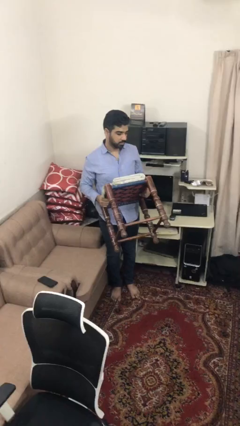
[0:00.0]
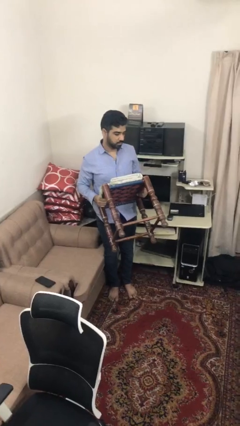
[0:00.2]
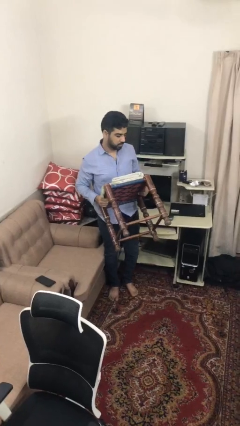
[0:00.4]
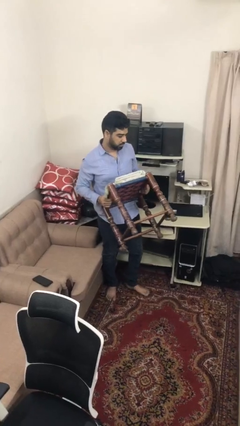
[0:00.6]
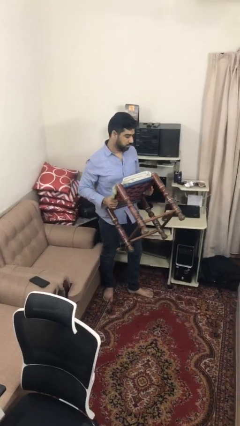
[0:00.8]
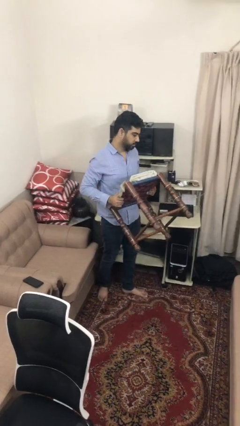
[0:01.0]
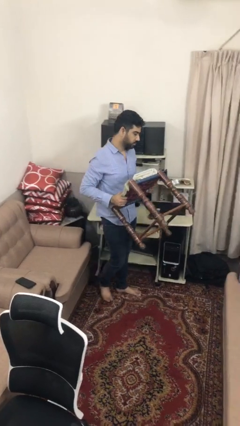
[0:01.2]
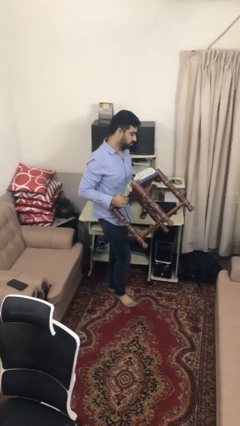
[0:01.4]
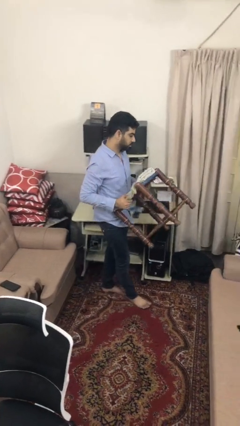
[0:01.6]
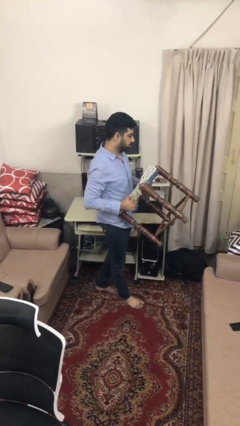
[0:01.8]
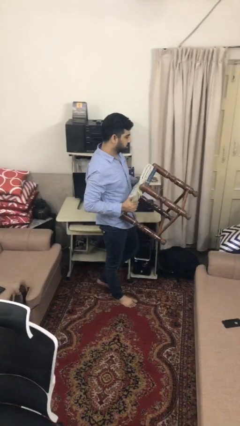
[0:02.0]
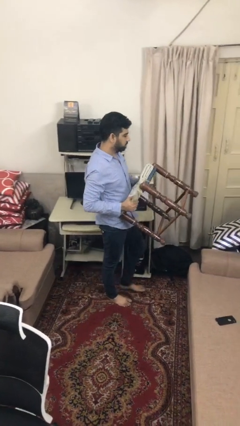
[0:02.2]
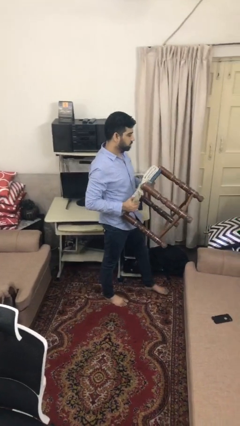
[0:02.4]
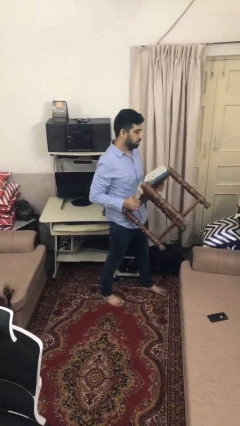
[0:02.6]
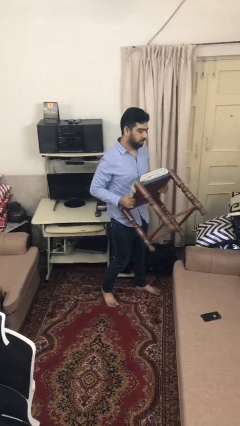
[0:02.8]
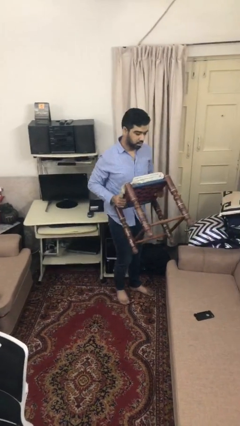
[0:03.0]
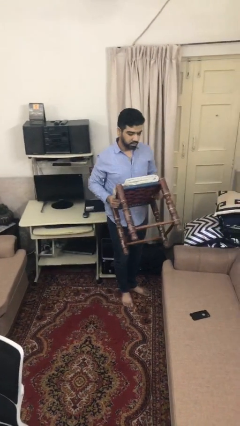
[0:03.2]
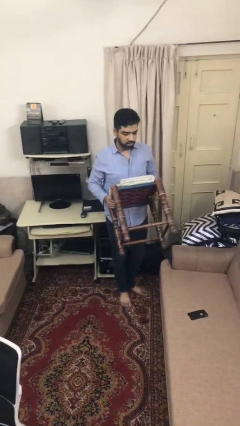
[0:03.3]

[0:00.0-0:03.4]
person carries furniture

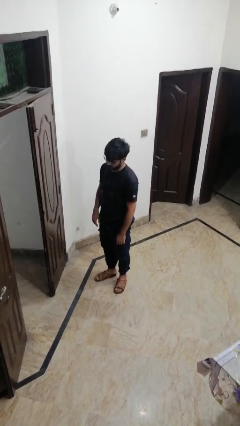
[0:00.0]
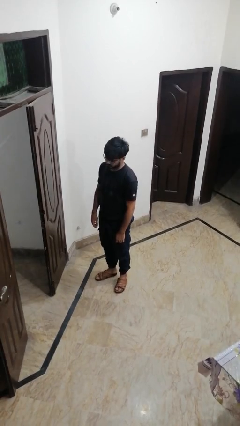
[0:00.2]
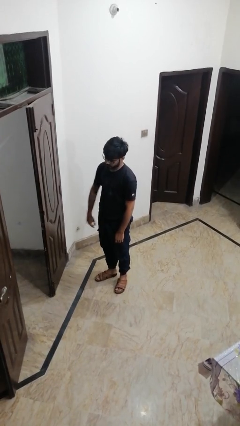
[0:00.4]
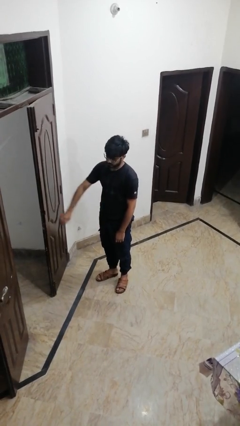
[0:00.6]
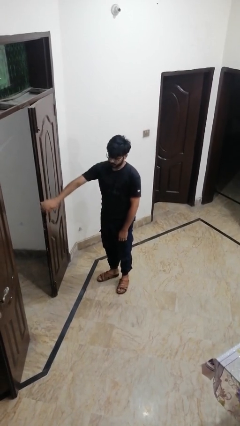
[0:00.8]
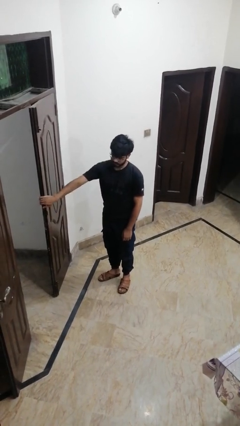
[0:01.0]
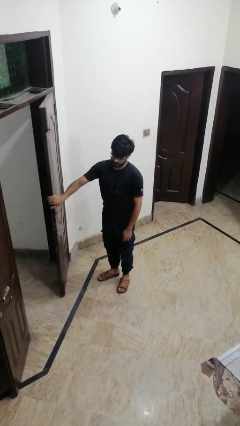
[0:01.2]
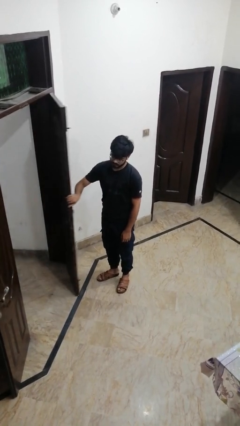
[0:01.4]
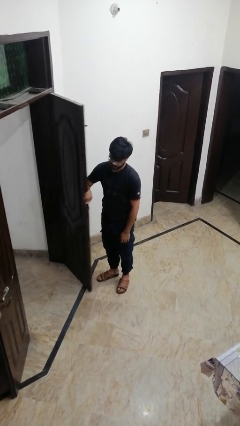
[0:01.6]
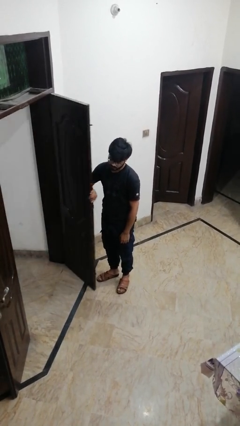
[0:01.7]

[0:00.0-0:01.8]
person opens facility door

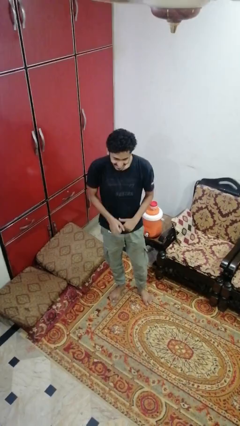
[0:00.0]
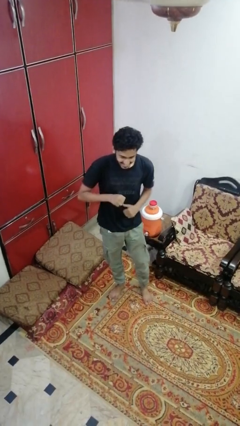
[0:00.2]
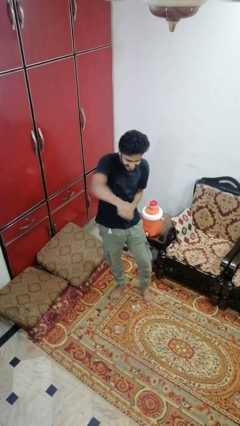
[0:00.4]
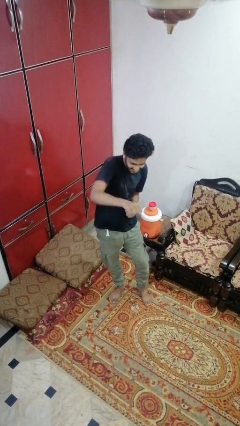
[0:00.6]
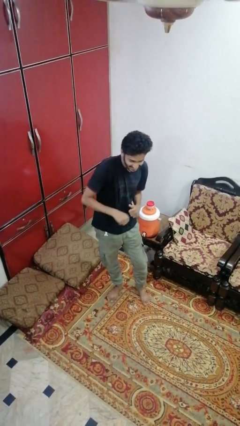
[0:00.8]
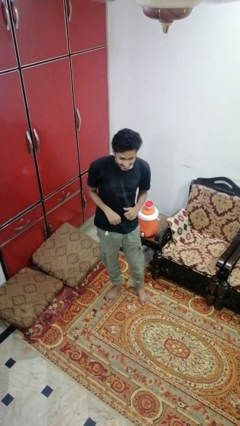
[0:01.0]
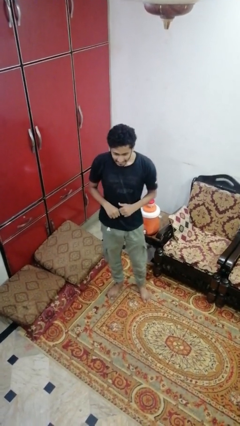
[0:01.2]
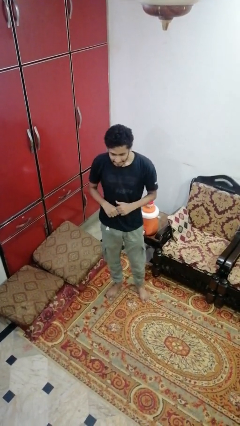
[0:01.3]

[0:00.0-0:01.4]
person punches

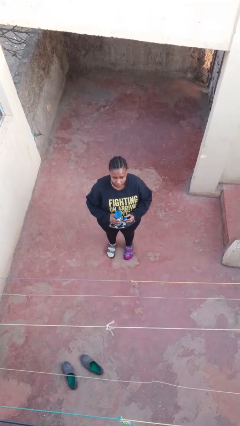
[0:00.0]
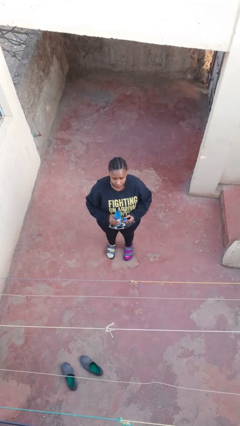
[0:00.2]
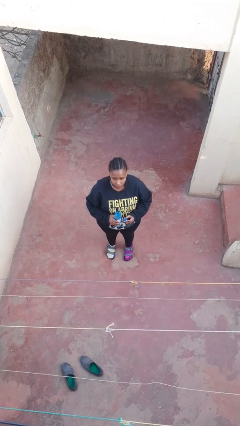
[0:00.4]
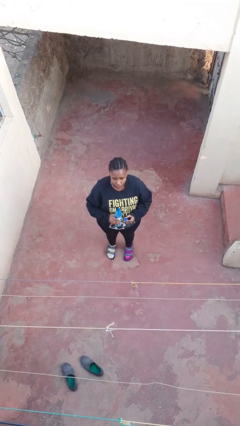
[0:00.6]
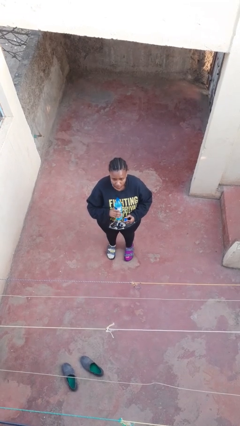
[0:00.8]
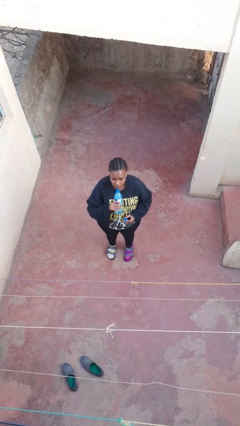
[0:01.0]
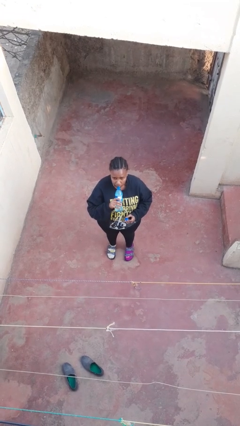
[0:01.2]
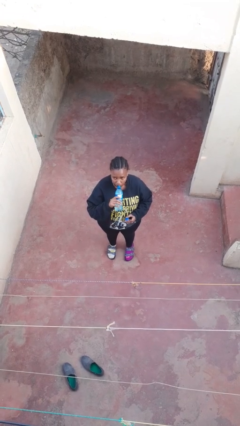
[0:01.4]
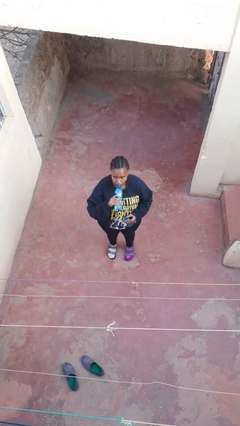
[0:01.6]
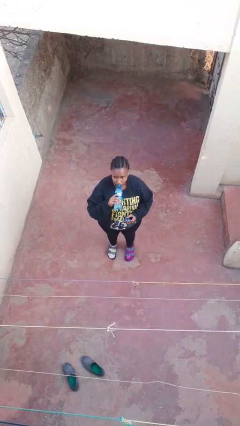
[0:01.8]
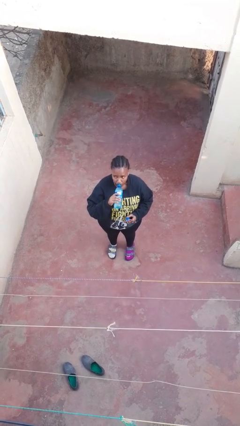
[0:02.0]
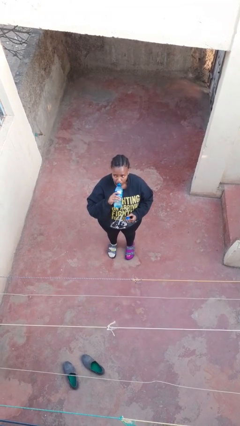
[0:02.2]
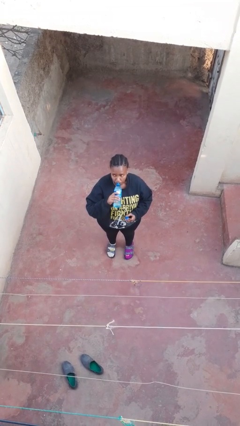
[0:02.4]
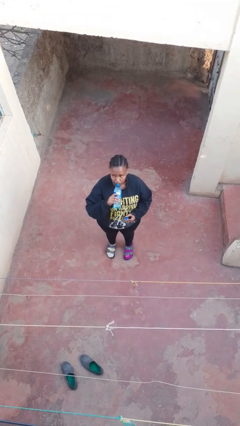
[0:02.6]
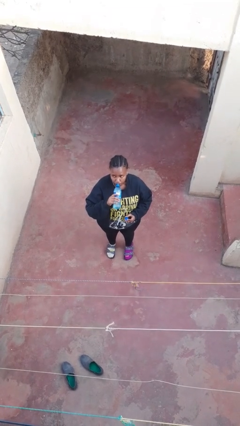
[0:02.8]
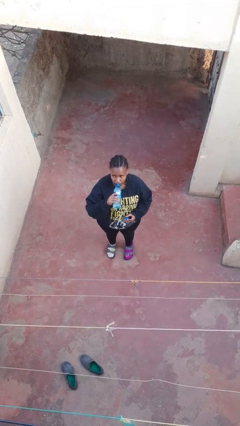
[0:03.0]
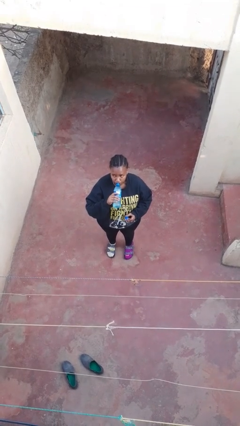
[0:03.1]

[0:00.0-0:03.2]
person drinks from bottle

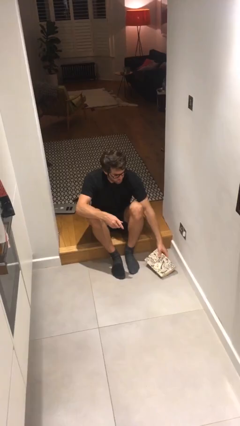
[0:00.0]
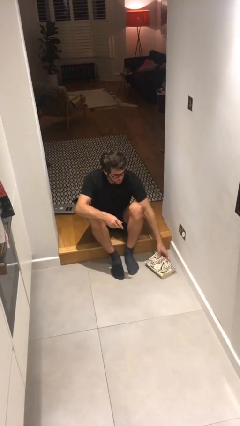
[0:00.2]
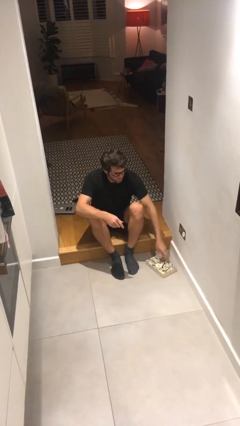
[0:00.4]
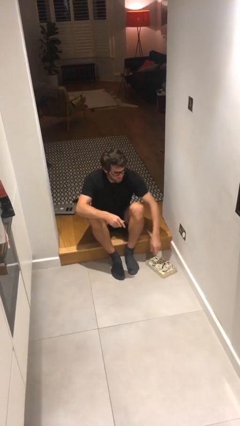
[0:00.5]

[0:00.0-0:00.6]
person puts down object on floor

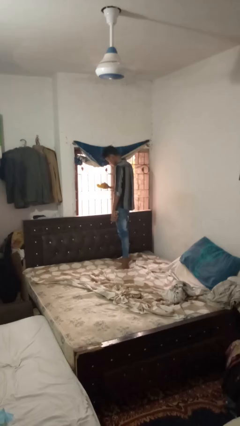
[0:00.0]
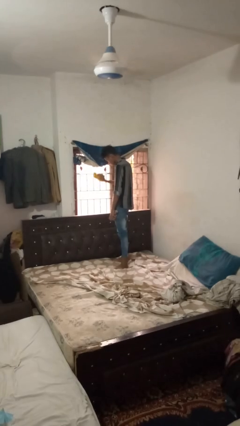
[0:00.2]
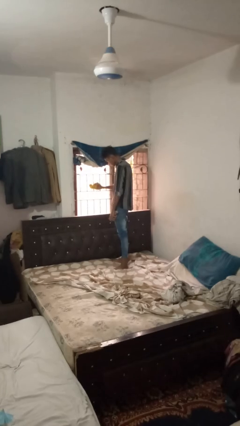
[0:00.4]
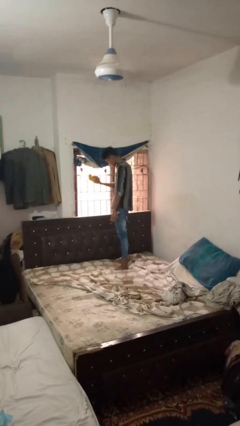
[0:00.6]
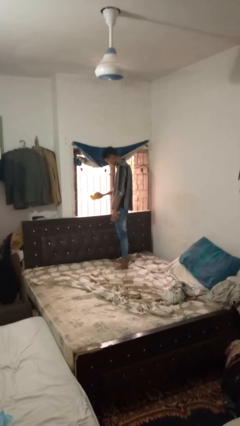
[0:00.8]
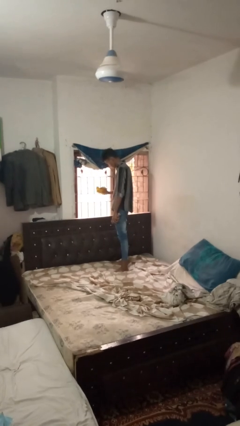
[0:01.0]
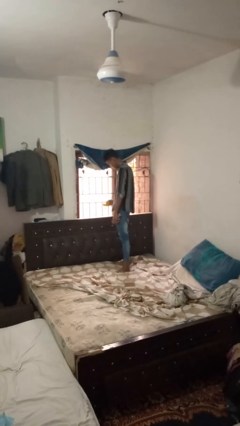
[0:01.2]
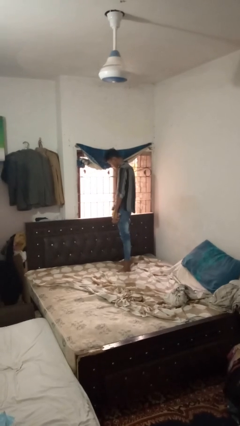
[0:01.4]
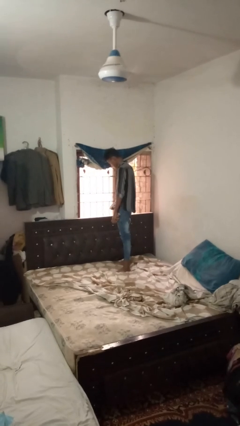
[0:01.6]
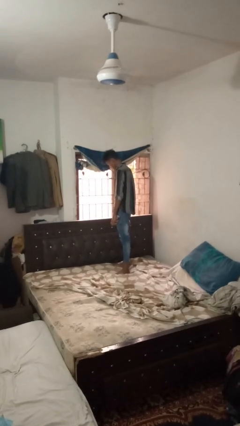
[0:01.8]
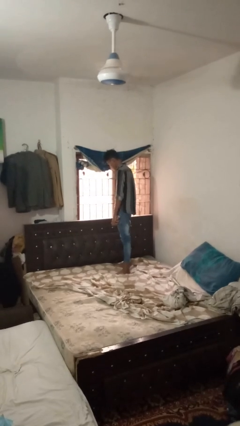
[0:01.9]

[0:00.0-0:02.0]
person washes window

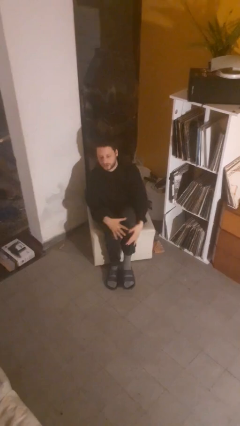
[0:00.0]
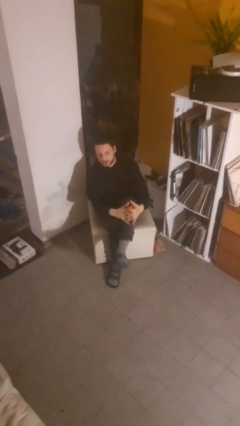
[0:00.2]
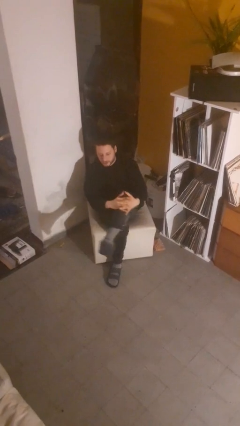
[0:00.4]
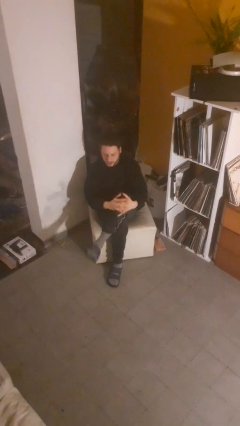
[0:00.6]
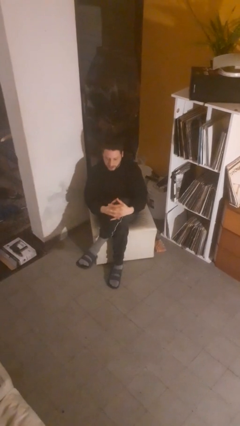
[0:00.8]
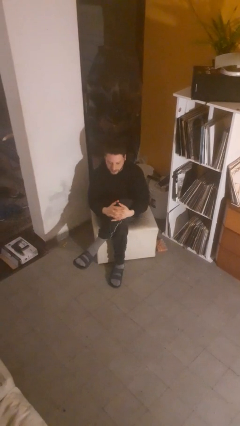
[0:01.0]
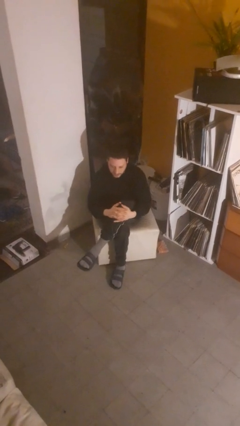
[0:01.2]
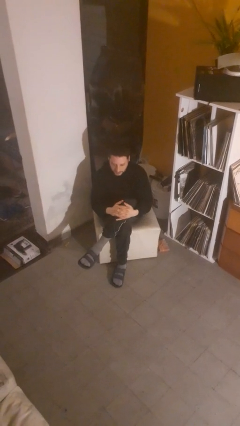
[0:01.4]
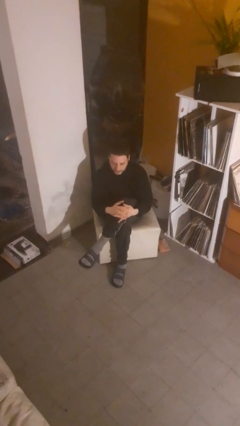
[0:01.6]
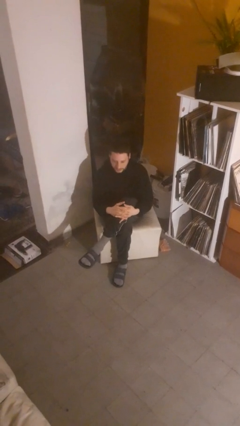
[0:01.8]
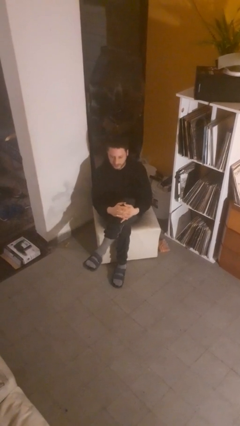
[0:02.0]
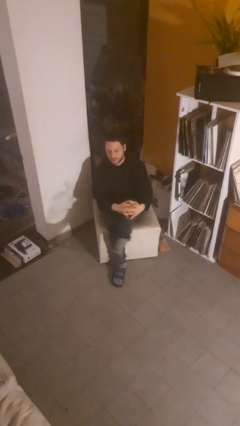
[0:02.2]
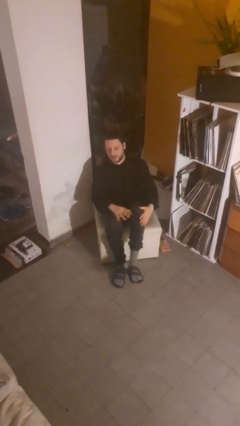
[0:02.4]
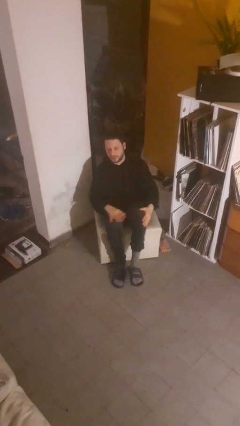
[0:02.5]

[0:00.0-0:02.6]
person crosses legs

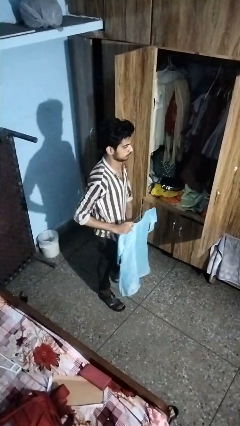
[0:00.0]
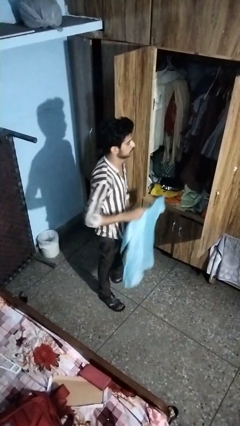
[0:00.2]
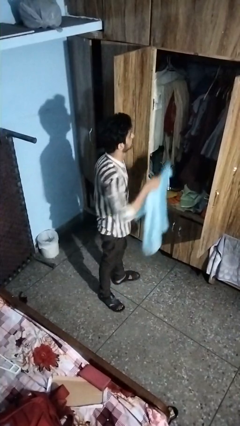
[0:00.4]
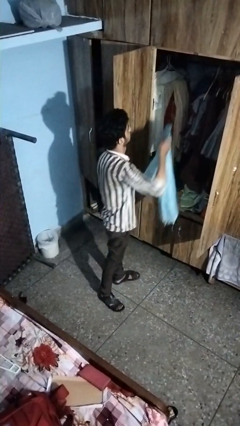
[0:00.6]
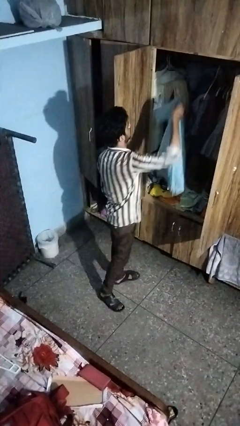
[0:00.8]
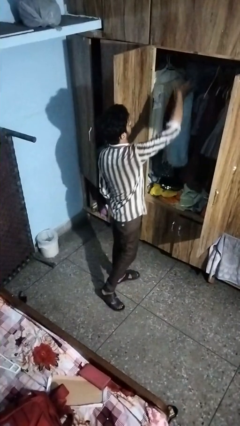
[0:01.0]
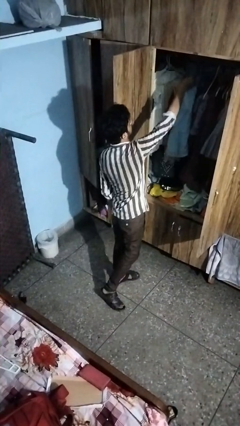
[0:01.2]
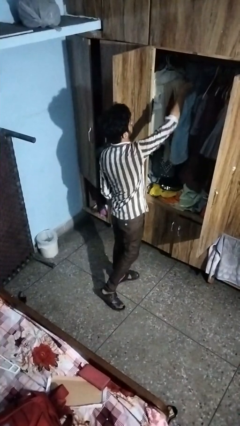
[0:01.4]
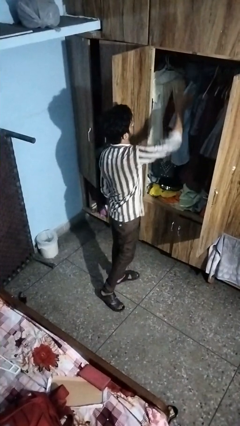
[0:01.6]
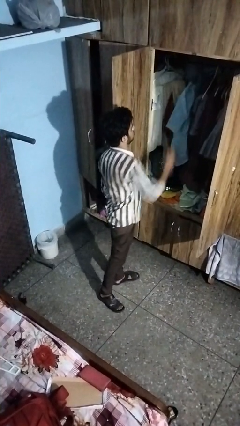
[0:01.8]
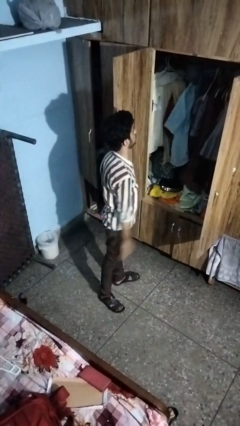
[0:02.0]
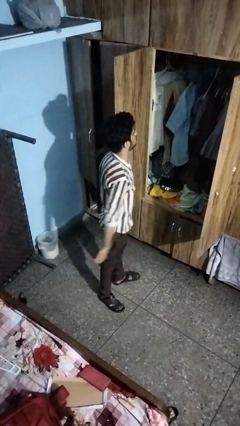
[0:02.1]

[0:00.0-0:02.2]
person puts clothes into closet
